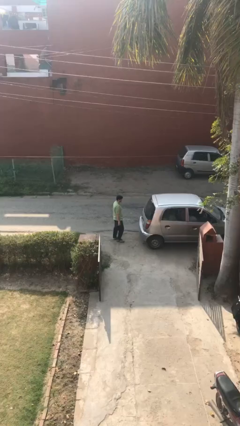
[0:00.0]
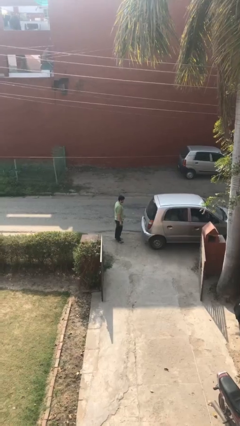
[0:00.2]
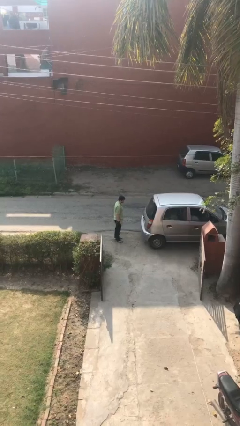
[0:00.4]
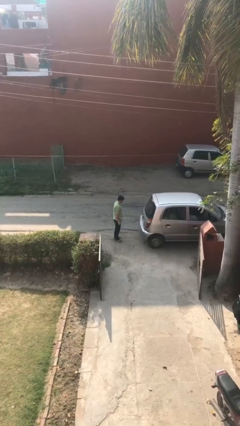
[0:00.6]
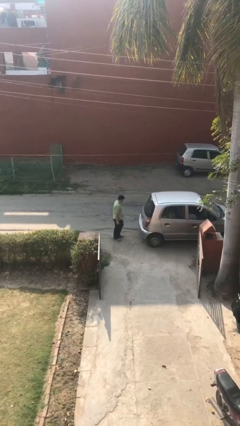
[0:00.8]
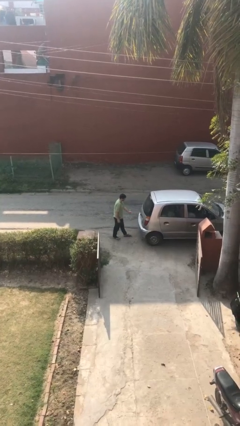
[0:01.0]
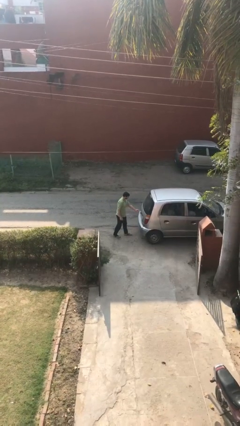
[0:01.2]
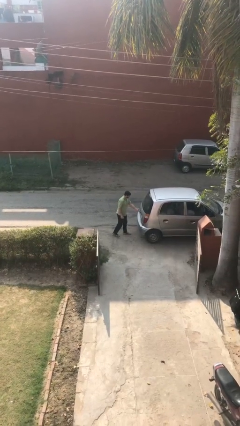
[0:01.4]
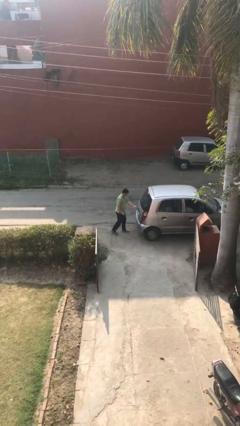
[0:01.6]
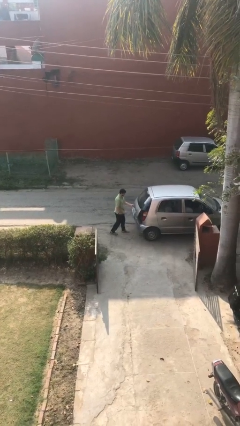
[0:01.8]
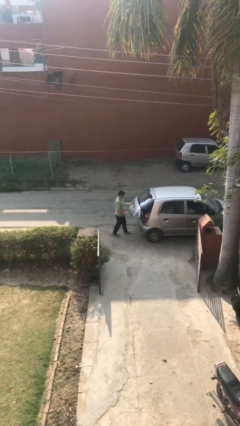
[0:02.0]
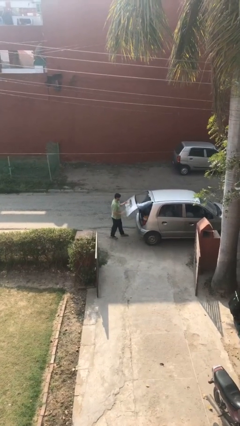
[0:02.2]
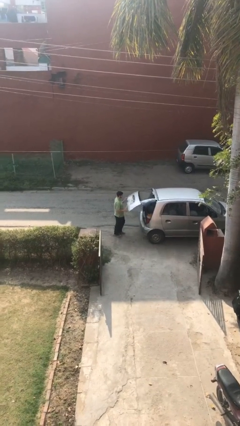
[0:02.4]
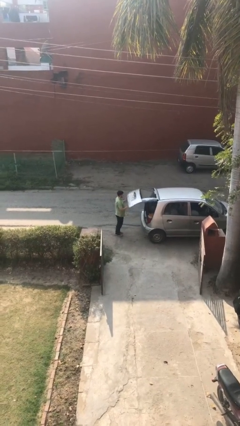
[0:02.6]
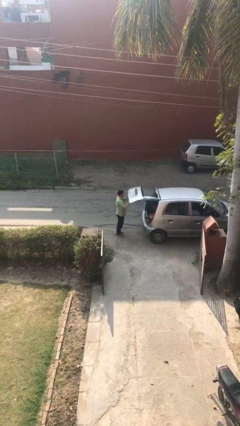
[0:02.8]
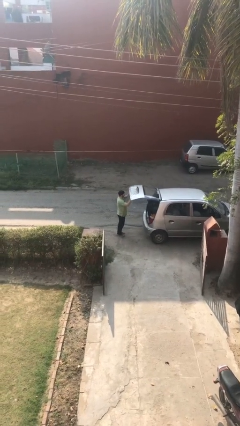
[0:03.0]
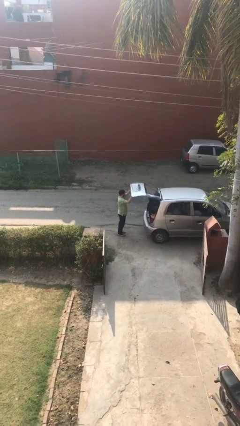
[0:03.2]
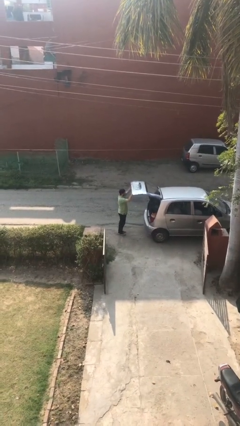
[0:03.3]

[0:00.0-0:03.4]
person opens car trunk

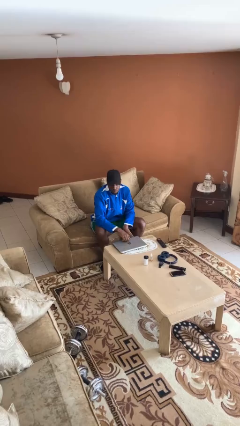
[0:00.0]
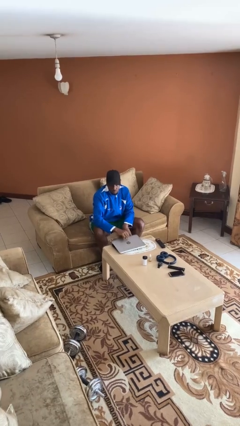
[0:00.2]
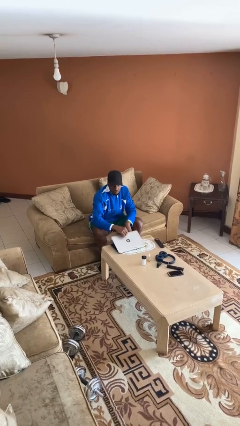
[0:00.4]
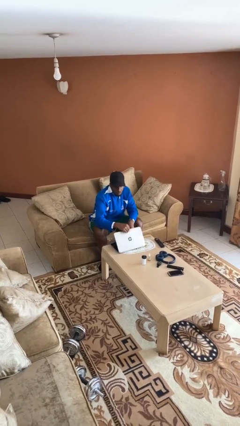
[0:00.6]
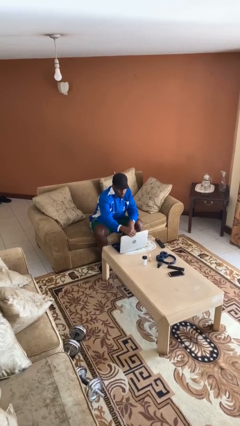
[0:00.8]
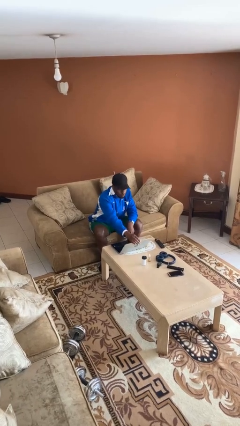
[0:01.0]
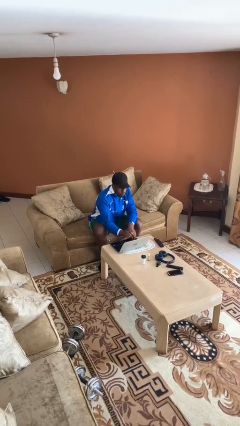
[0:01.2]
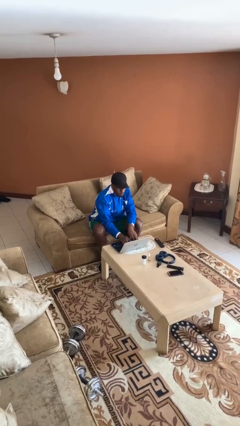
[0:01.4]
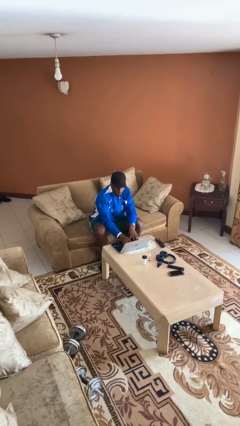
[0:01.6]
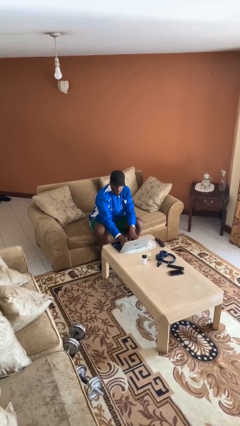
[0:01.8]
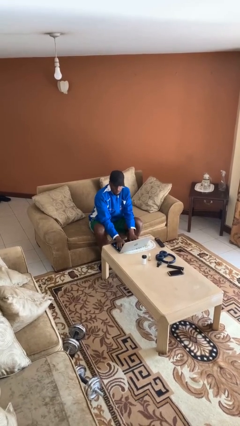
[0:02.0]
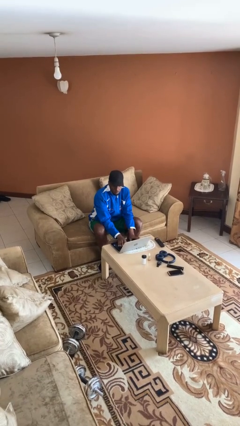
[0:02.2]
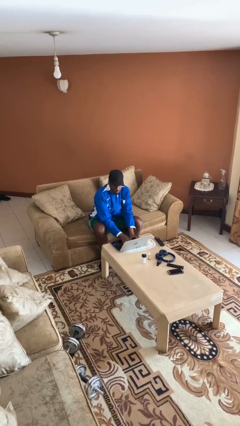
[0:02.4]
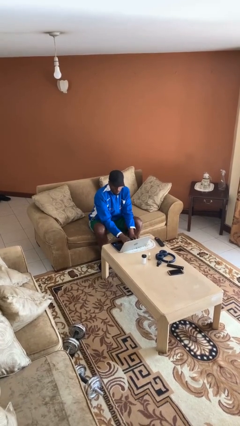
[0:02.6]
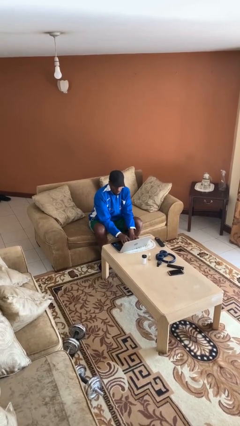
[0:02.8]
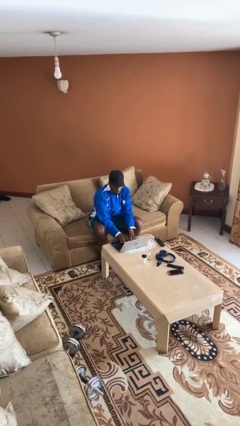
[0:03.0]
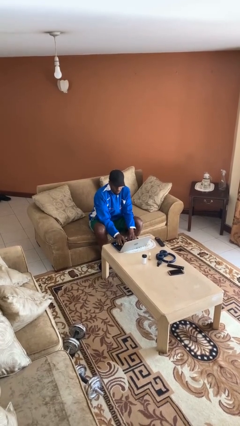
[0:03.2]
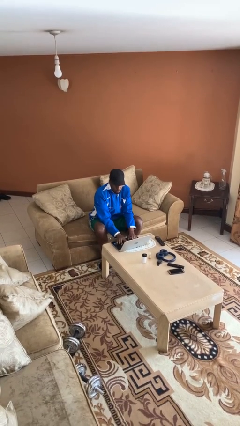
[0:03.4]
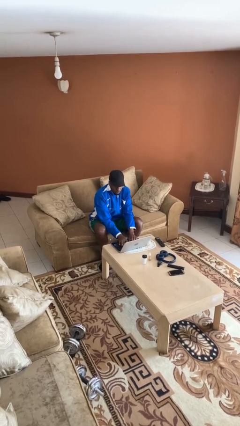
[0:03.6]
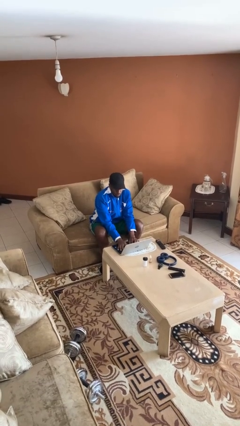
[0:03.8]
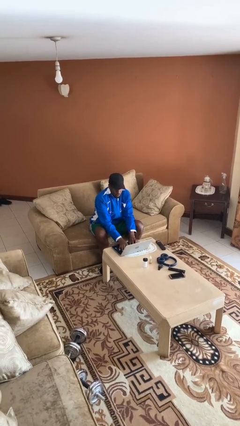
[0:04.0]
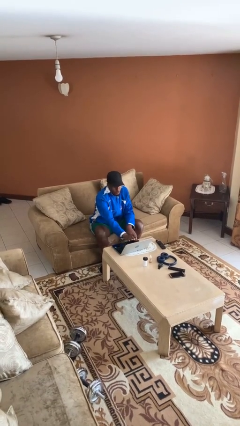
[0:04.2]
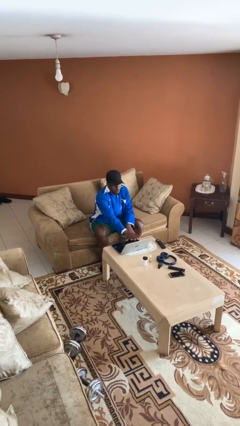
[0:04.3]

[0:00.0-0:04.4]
person interacts with laptop

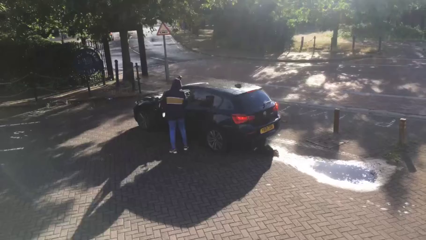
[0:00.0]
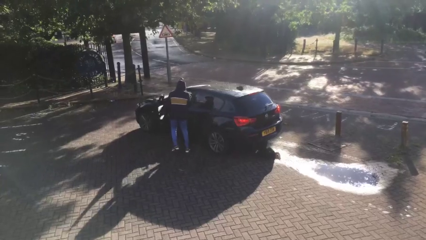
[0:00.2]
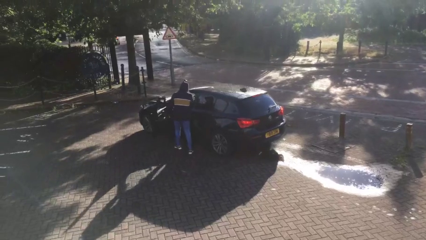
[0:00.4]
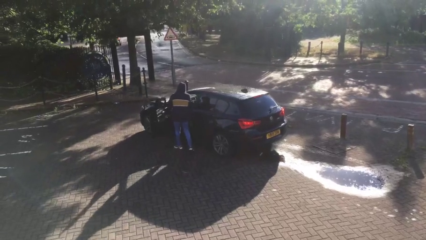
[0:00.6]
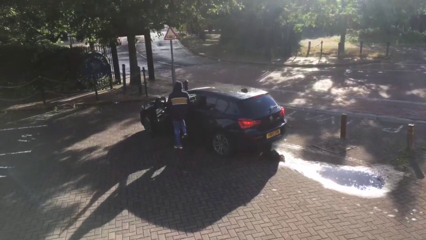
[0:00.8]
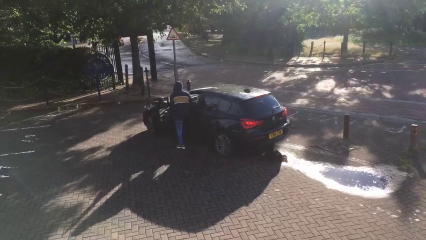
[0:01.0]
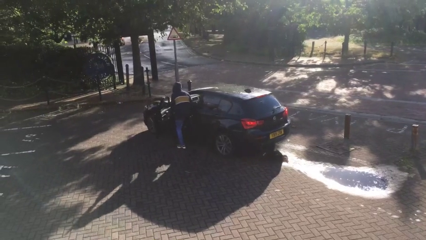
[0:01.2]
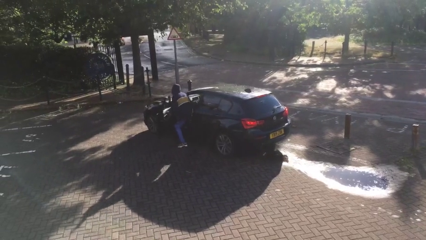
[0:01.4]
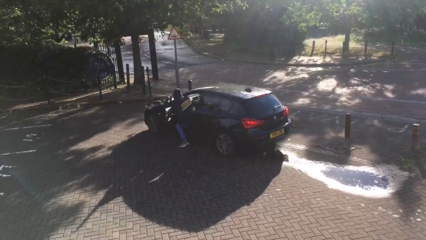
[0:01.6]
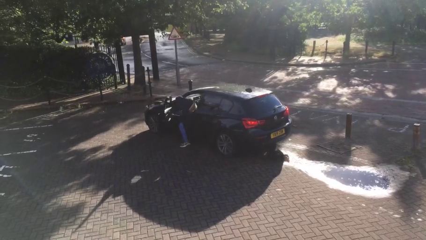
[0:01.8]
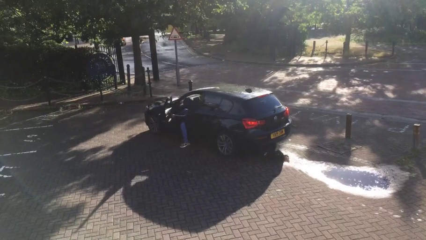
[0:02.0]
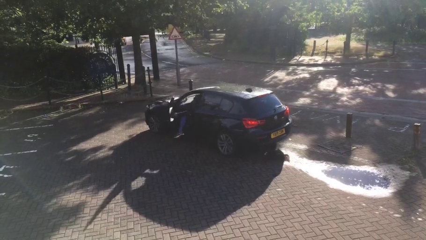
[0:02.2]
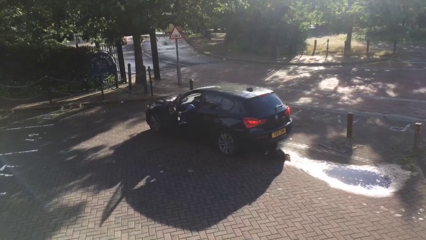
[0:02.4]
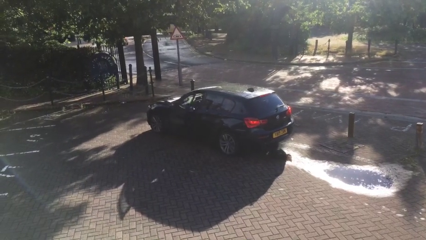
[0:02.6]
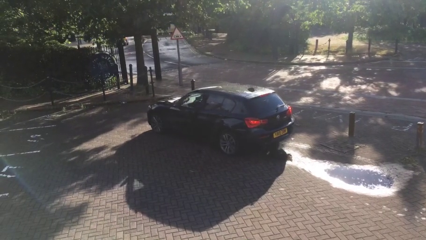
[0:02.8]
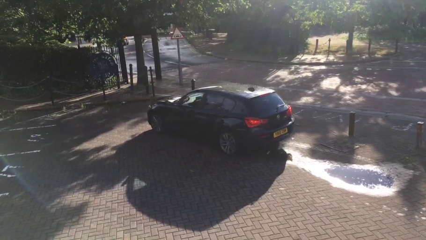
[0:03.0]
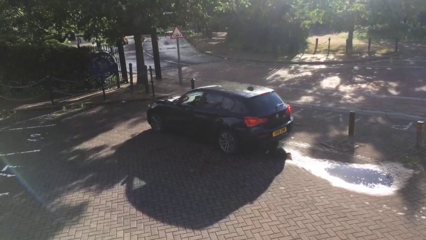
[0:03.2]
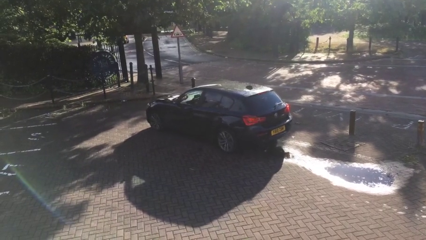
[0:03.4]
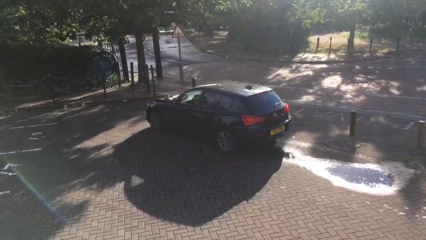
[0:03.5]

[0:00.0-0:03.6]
car picks up person

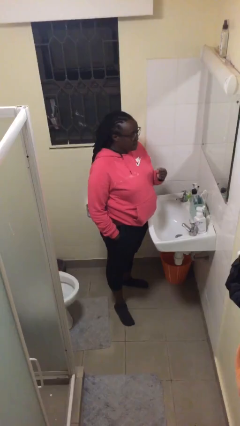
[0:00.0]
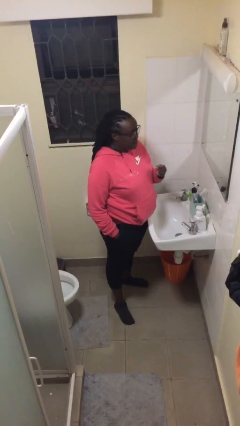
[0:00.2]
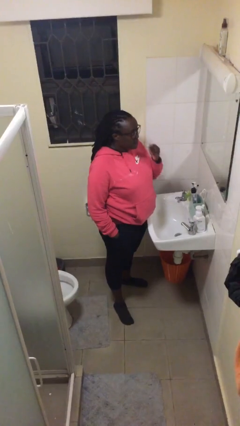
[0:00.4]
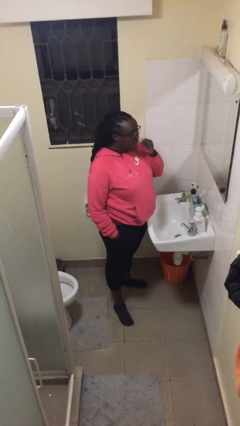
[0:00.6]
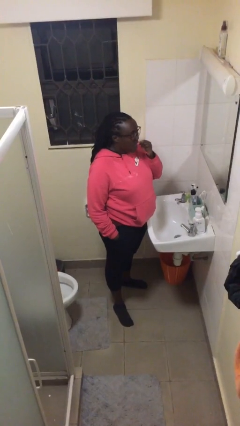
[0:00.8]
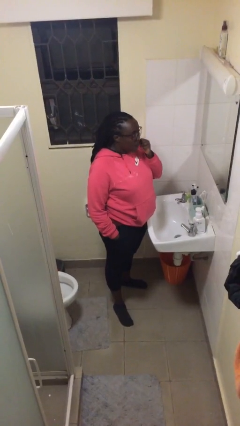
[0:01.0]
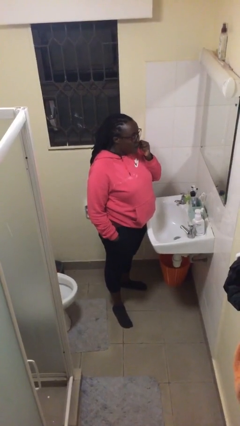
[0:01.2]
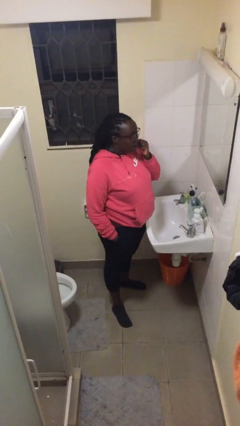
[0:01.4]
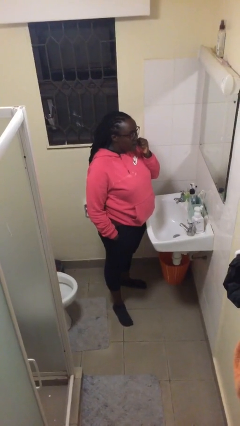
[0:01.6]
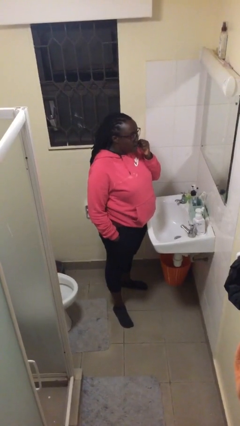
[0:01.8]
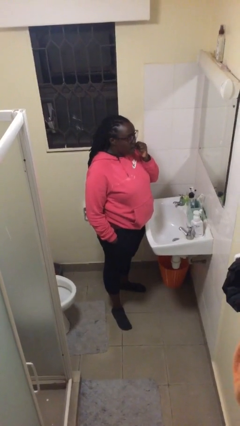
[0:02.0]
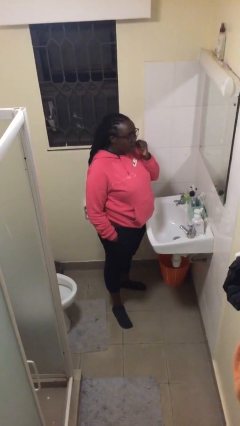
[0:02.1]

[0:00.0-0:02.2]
person flosses

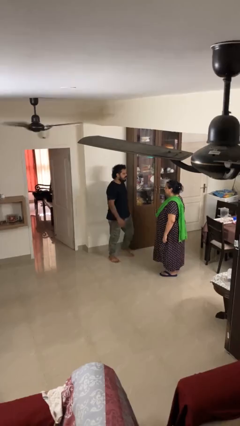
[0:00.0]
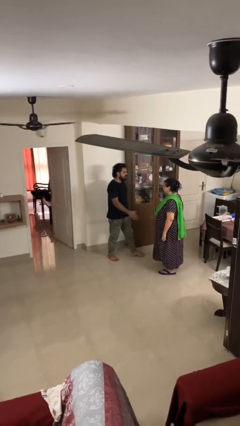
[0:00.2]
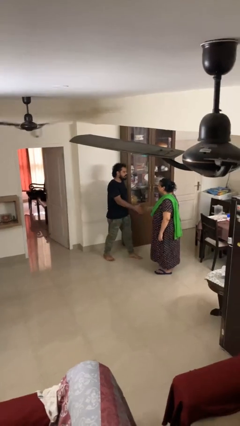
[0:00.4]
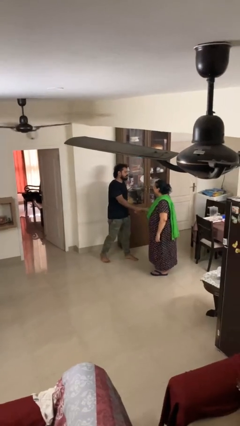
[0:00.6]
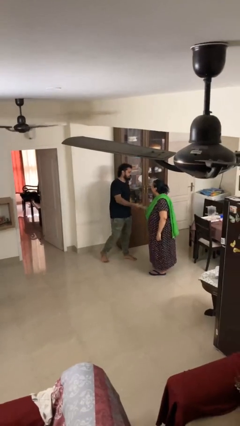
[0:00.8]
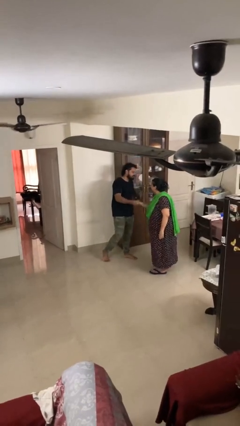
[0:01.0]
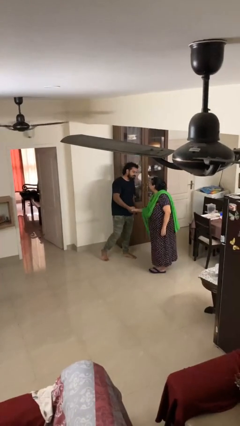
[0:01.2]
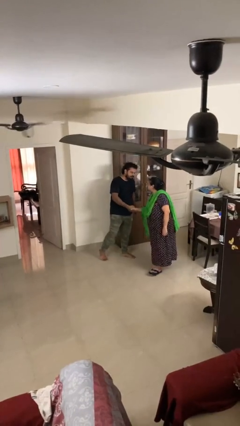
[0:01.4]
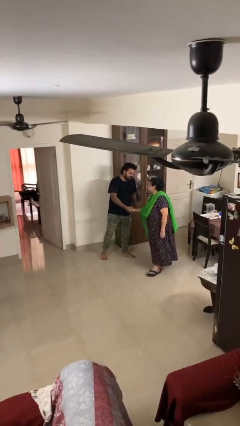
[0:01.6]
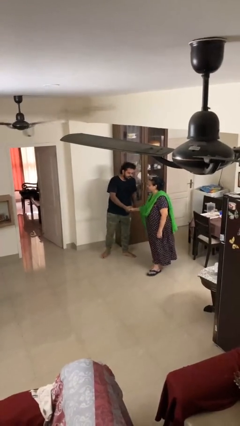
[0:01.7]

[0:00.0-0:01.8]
person shakes hand

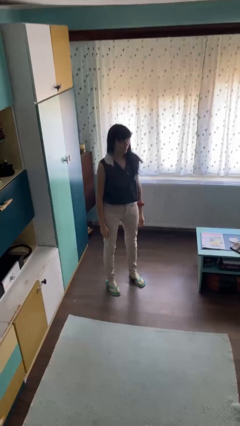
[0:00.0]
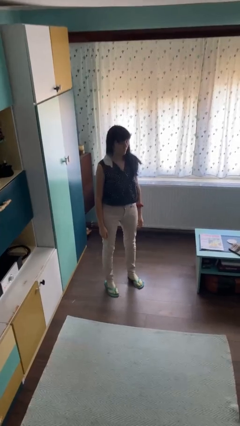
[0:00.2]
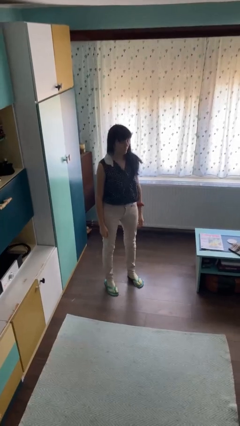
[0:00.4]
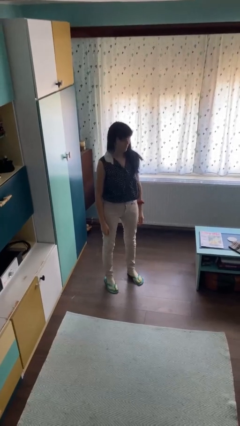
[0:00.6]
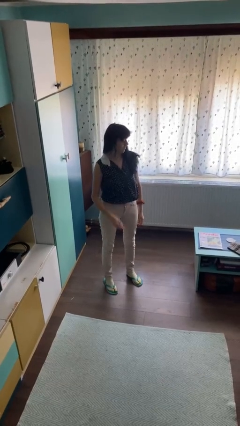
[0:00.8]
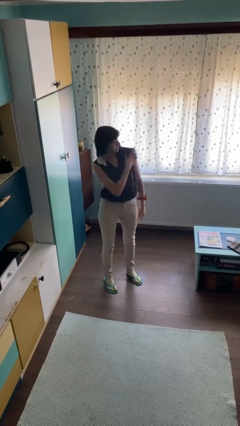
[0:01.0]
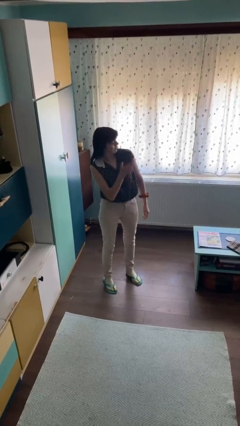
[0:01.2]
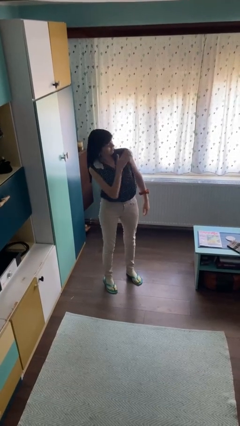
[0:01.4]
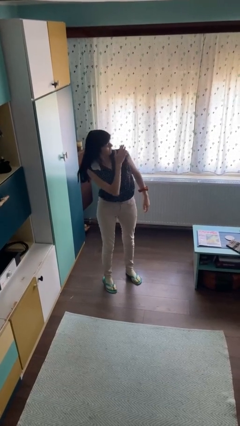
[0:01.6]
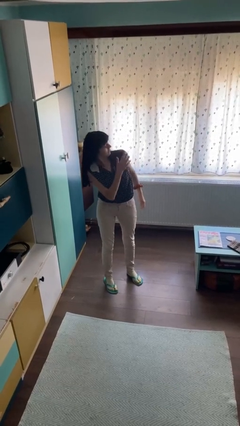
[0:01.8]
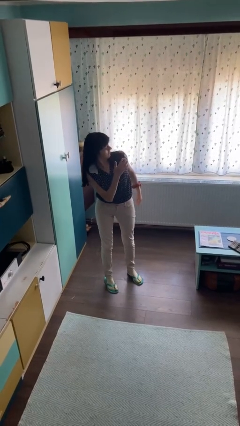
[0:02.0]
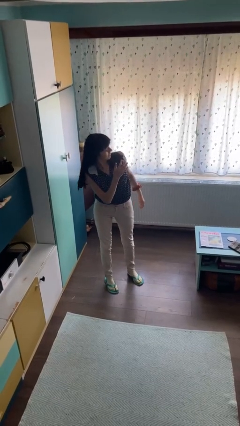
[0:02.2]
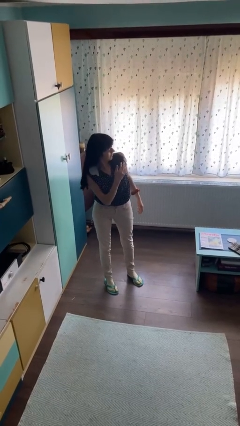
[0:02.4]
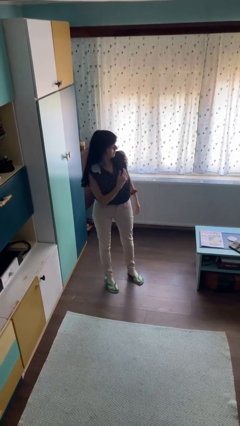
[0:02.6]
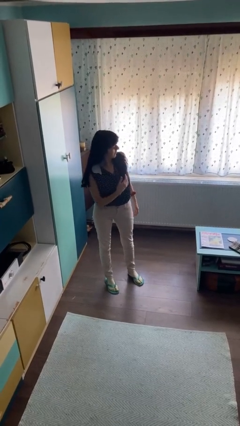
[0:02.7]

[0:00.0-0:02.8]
person swats bug
